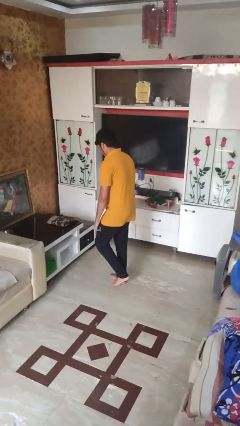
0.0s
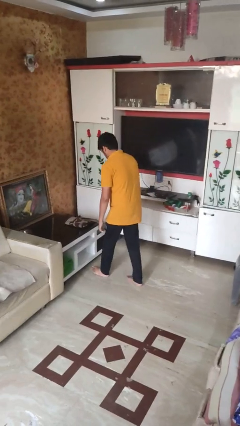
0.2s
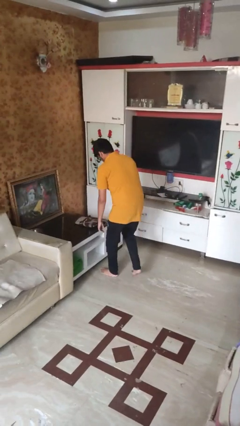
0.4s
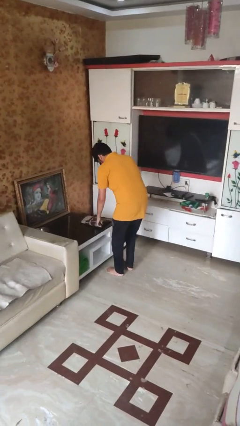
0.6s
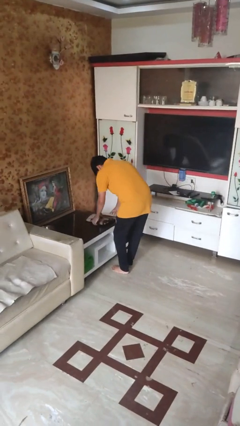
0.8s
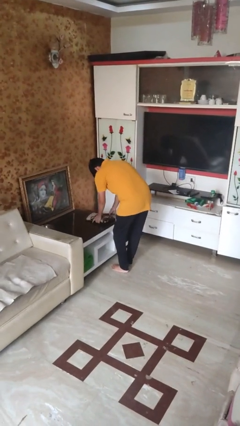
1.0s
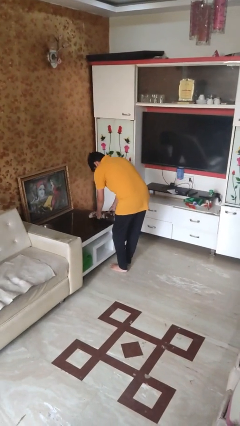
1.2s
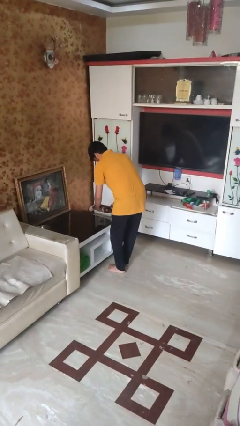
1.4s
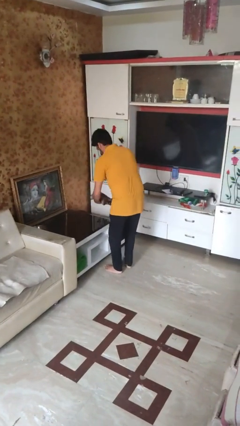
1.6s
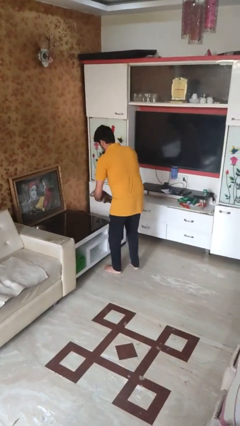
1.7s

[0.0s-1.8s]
person picks up object from table

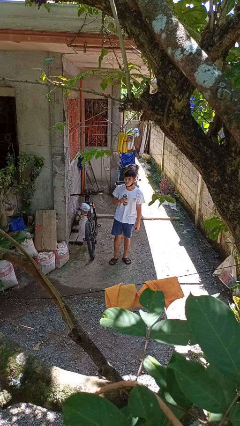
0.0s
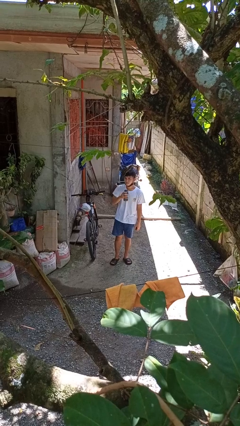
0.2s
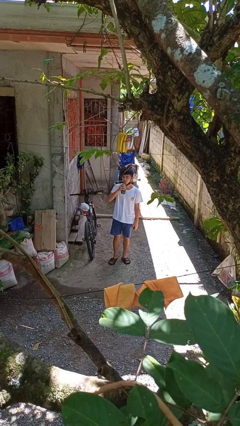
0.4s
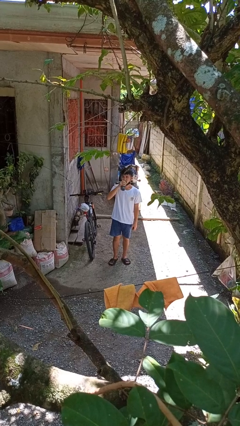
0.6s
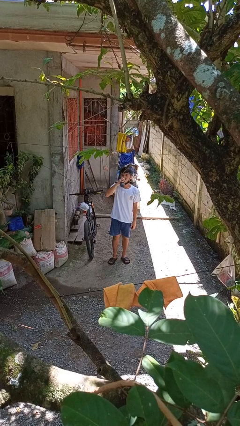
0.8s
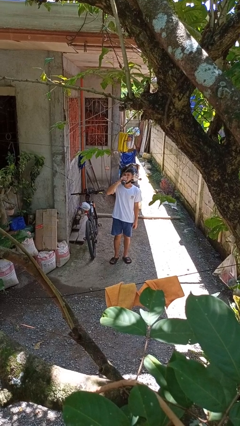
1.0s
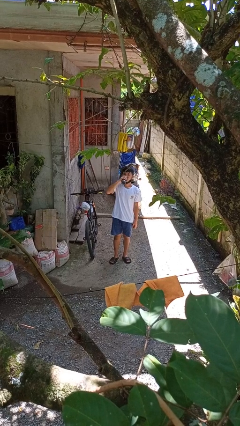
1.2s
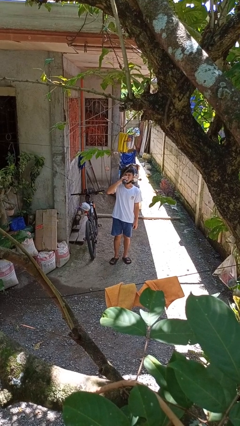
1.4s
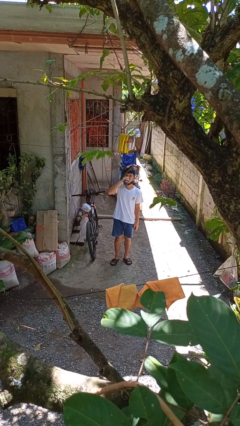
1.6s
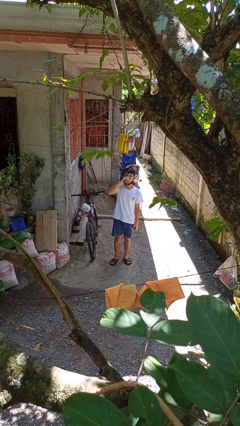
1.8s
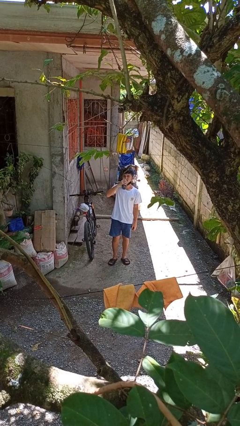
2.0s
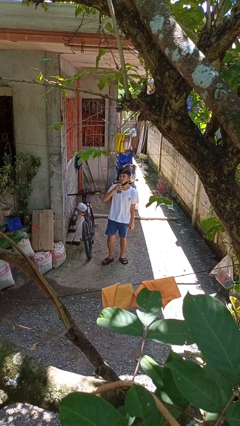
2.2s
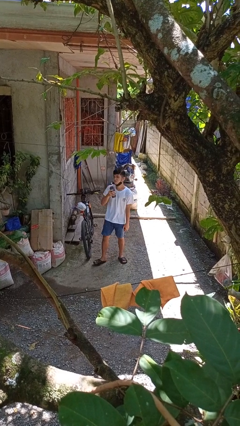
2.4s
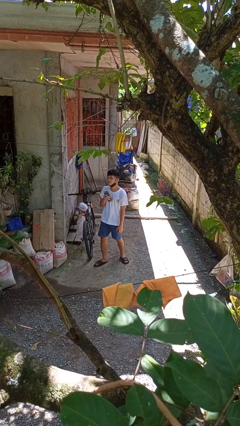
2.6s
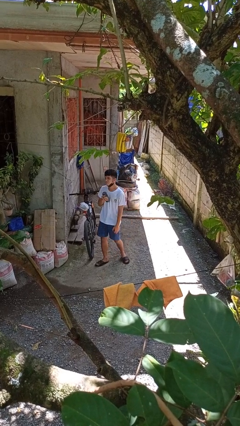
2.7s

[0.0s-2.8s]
person drinks from bottle

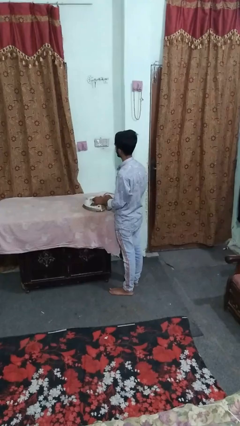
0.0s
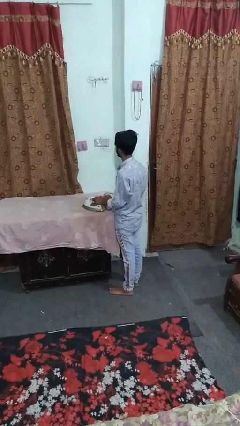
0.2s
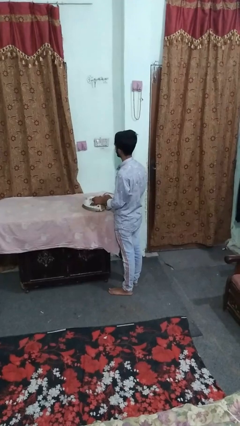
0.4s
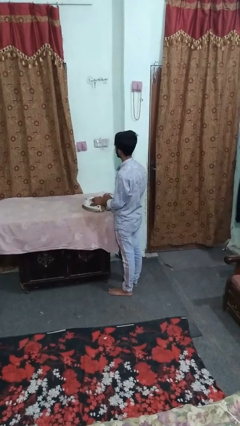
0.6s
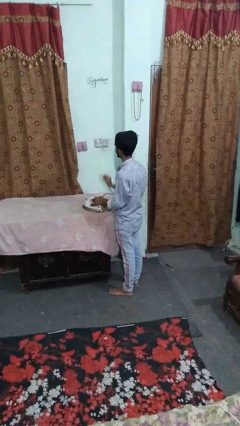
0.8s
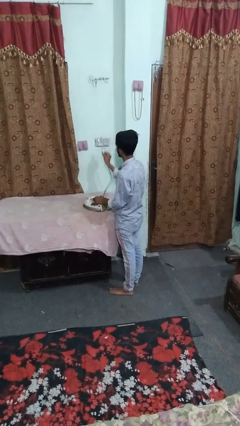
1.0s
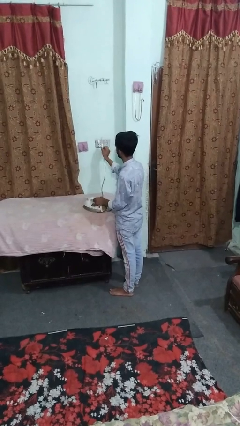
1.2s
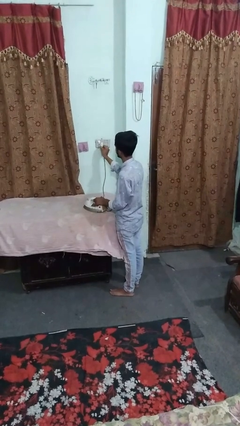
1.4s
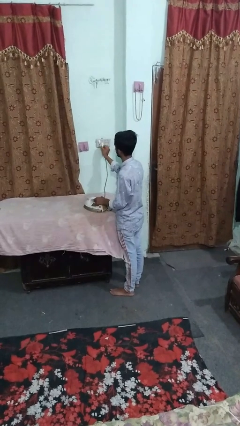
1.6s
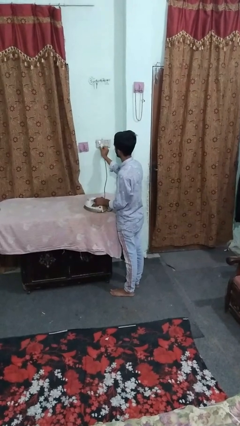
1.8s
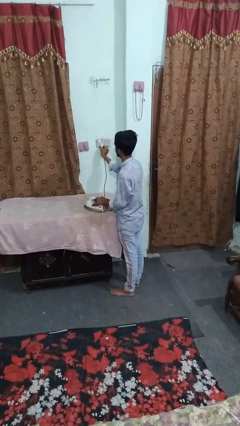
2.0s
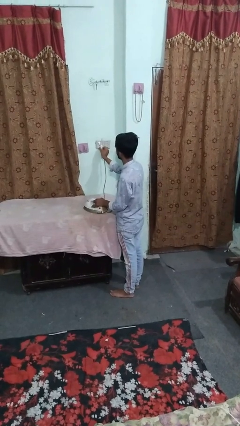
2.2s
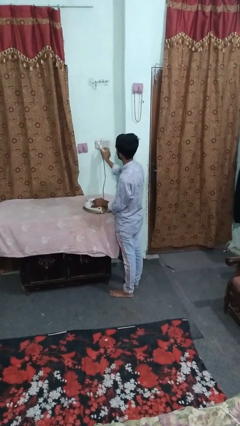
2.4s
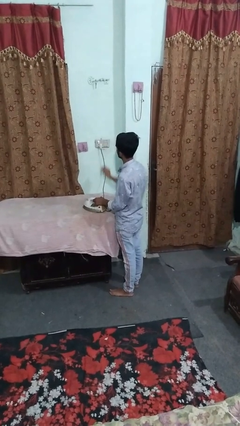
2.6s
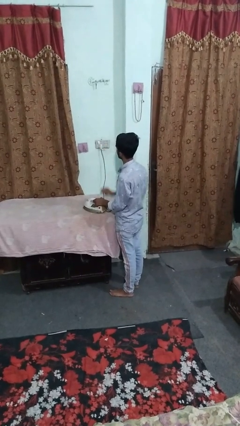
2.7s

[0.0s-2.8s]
person plugs into electrical socket

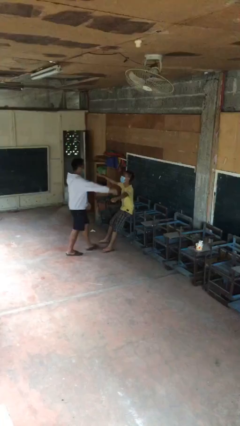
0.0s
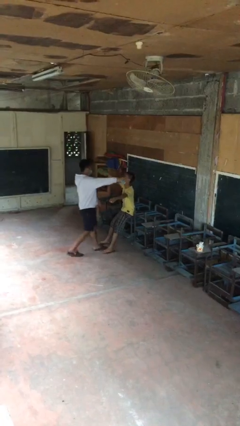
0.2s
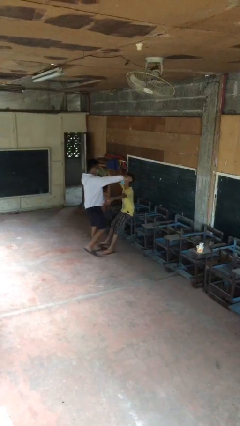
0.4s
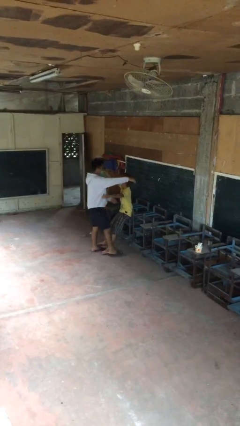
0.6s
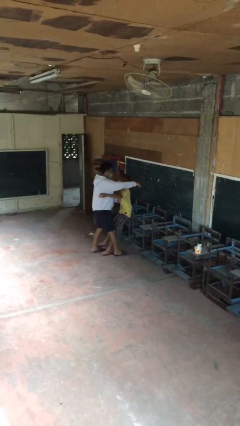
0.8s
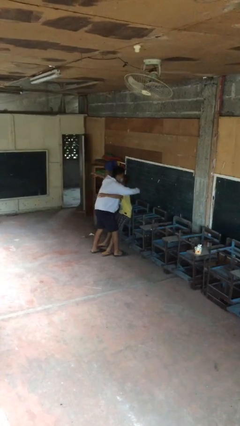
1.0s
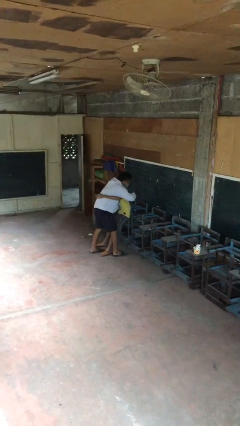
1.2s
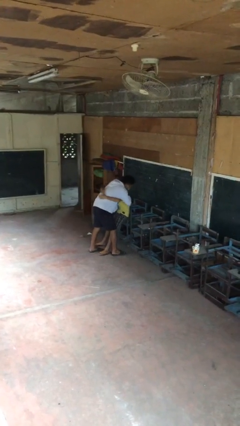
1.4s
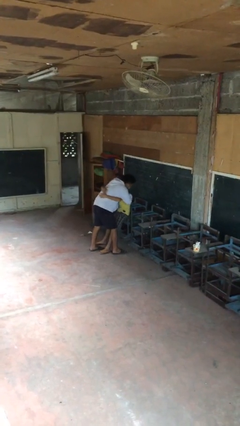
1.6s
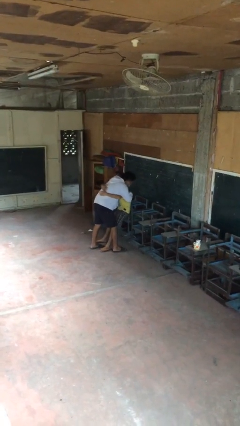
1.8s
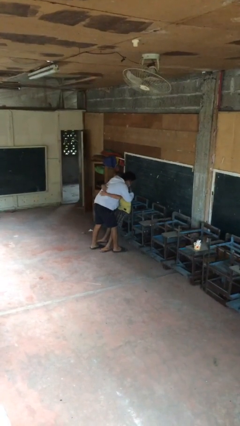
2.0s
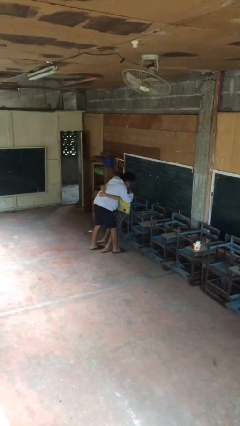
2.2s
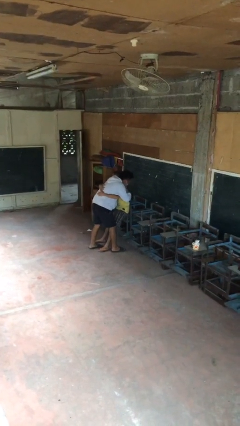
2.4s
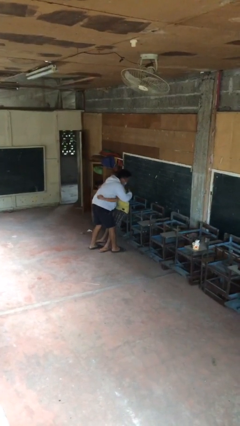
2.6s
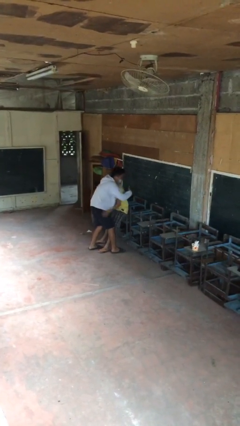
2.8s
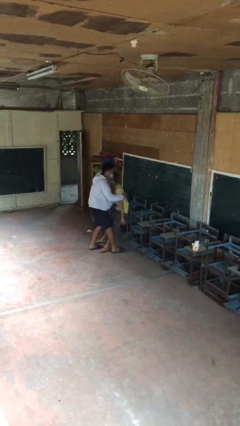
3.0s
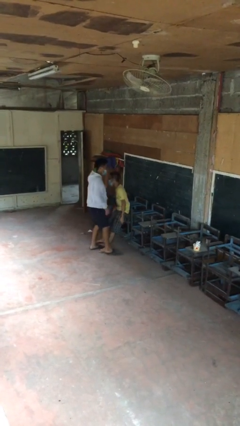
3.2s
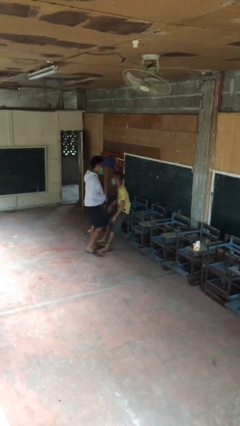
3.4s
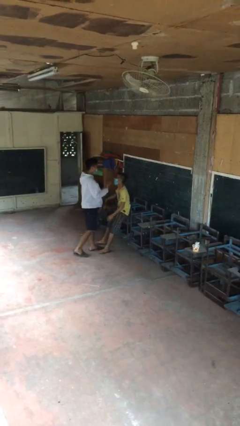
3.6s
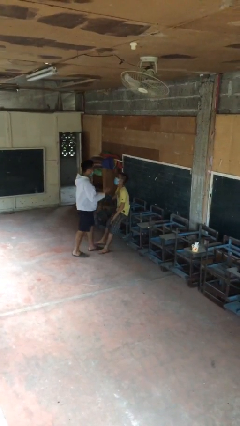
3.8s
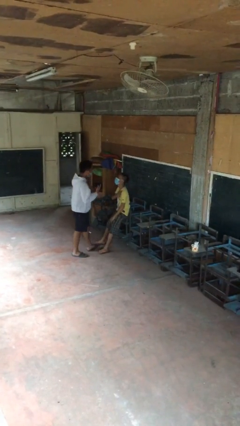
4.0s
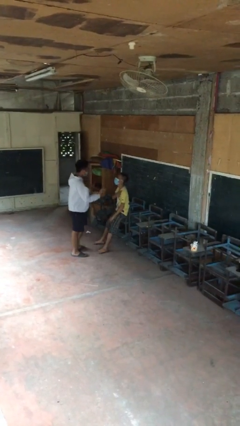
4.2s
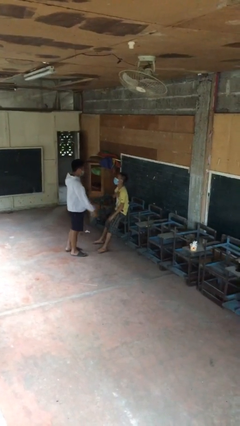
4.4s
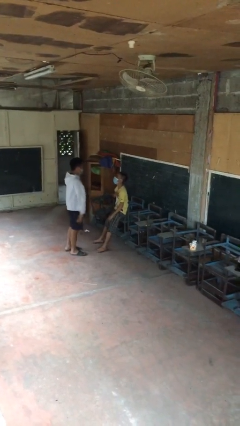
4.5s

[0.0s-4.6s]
person embraces person

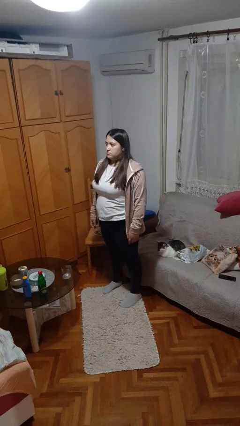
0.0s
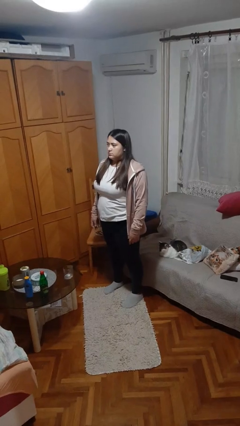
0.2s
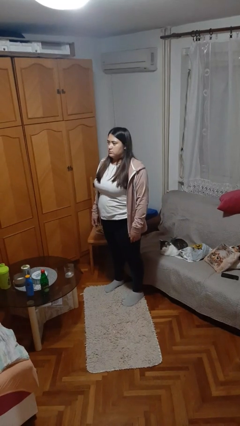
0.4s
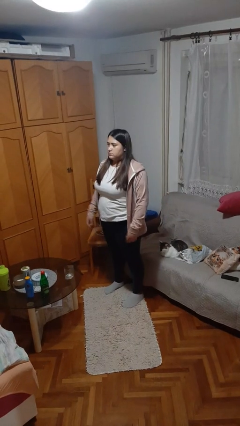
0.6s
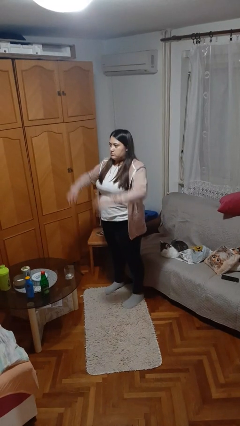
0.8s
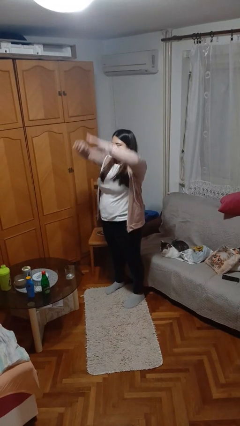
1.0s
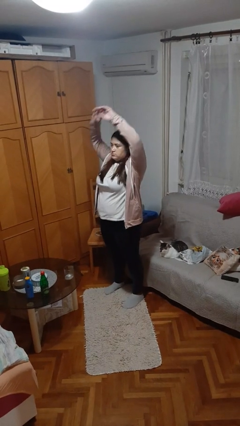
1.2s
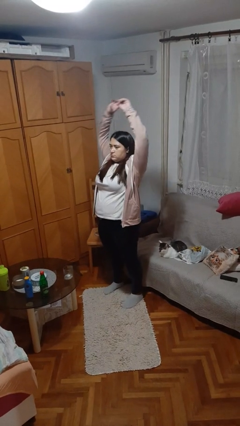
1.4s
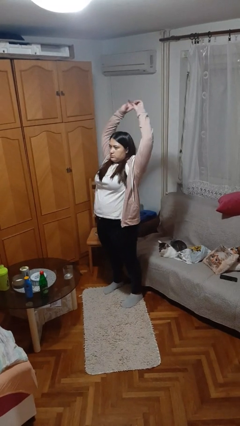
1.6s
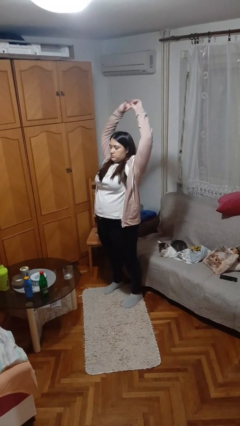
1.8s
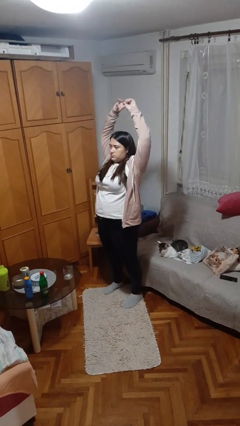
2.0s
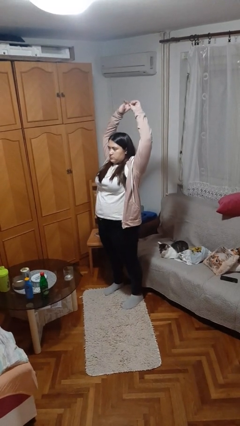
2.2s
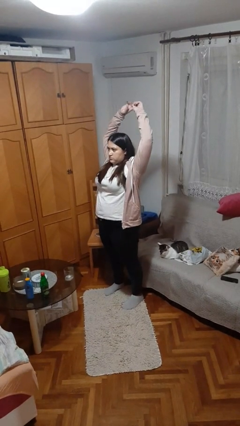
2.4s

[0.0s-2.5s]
person stretches arms over head

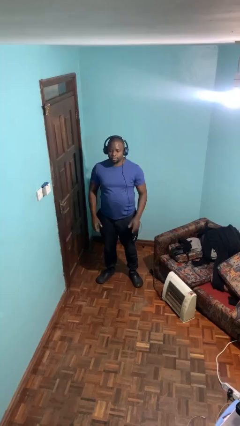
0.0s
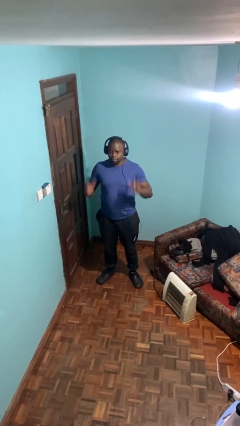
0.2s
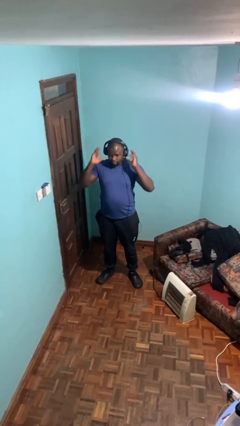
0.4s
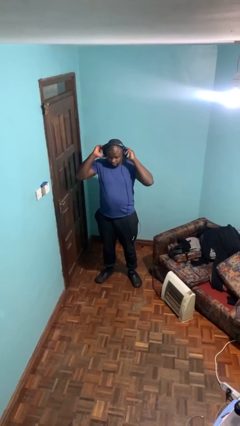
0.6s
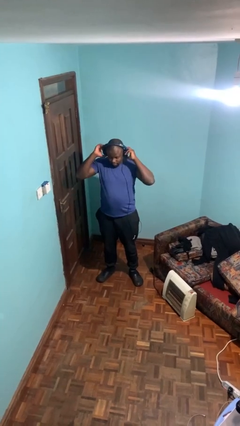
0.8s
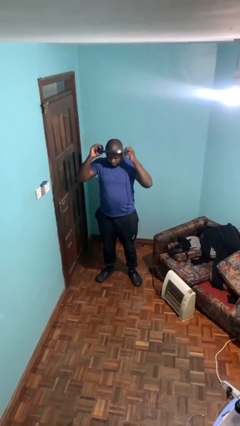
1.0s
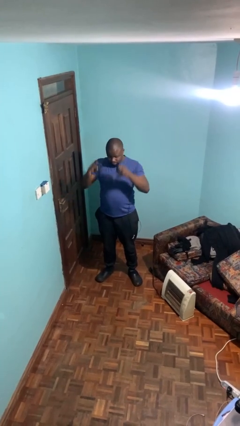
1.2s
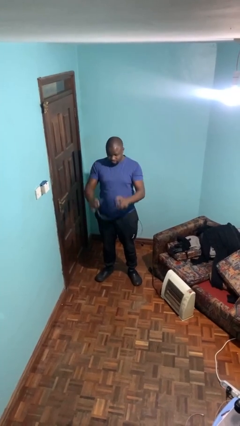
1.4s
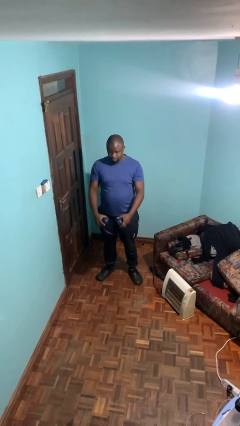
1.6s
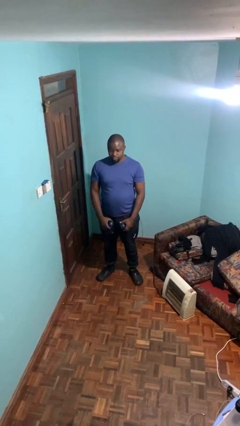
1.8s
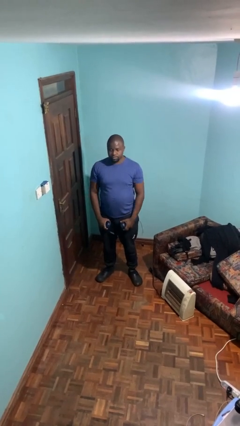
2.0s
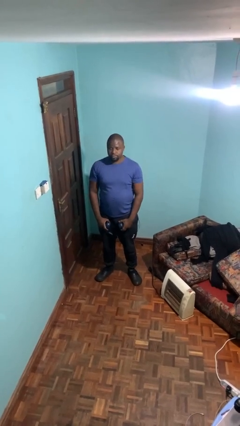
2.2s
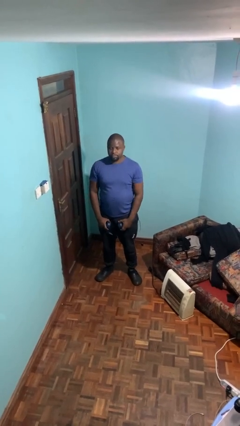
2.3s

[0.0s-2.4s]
person takes off headphones

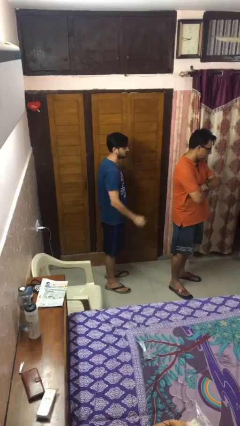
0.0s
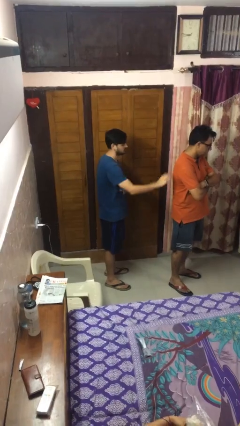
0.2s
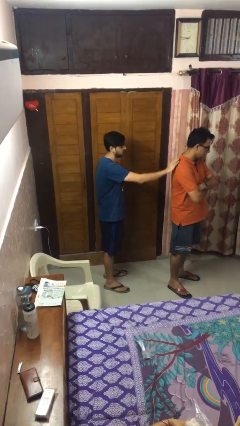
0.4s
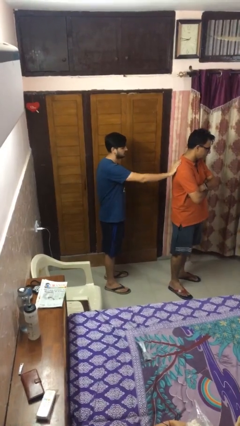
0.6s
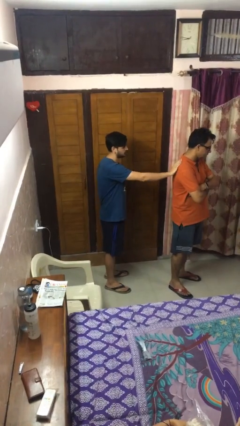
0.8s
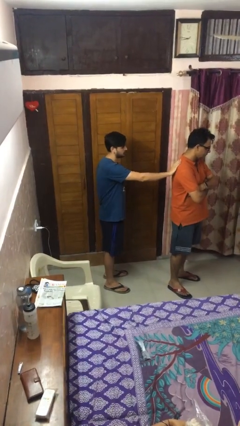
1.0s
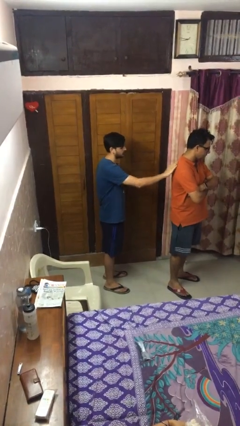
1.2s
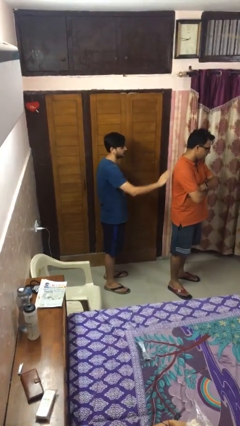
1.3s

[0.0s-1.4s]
person touches back of person
